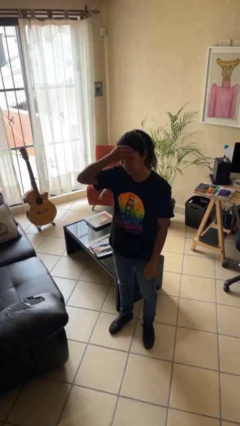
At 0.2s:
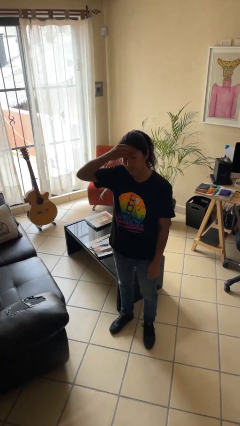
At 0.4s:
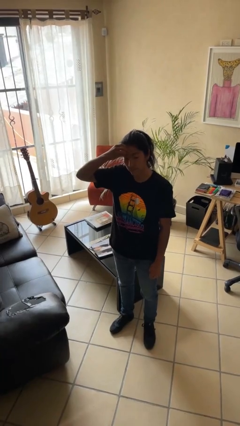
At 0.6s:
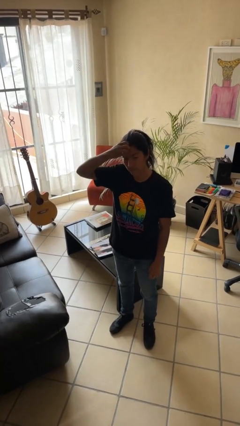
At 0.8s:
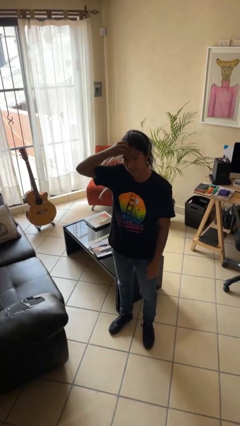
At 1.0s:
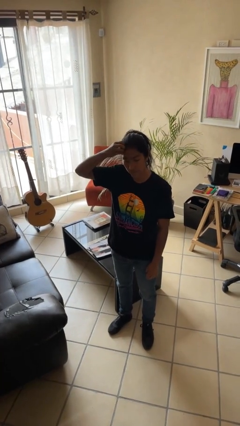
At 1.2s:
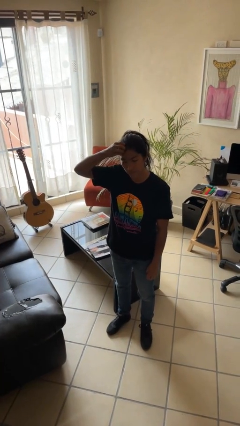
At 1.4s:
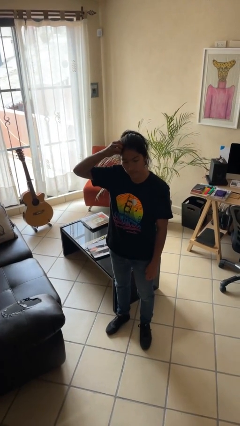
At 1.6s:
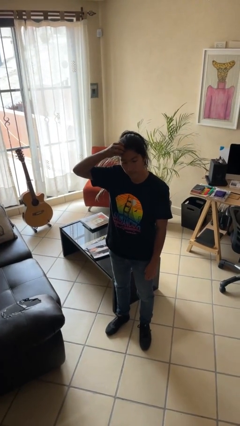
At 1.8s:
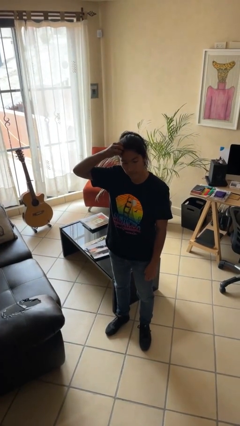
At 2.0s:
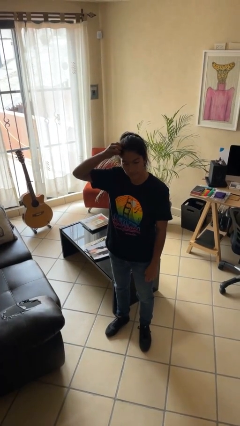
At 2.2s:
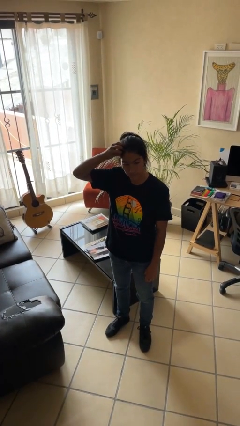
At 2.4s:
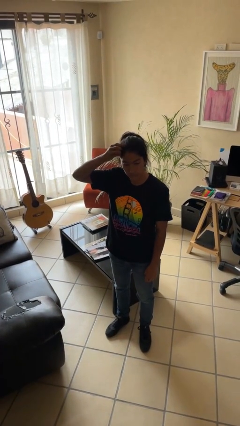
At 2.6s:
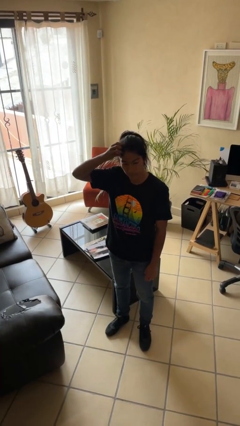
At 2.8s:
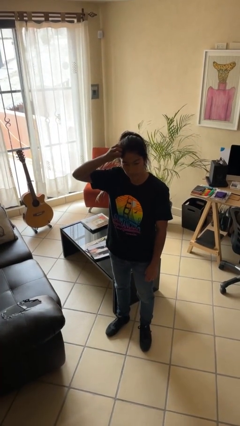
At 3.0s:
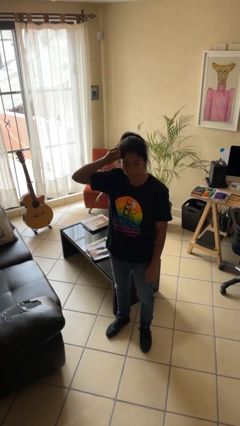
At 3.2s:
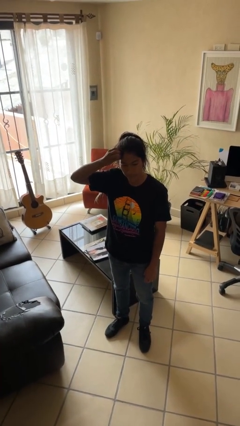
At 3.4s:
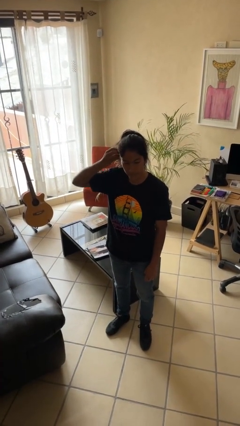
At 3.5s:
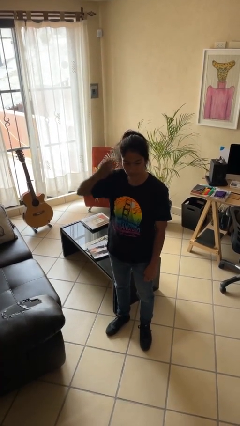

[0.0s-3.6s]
person scratches face

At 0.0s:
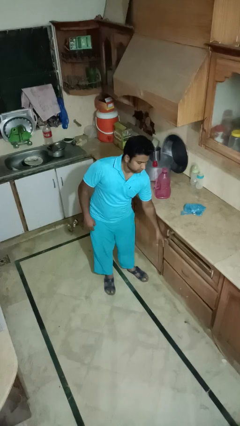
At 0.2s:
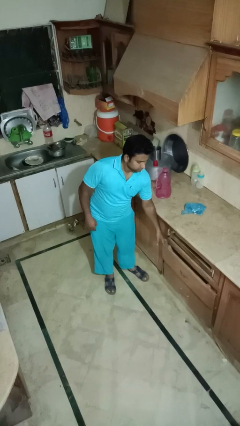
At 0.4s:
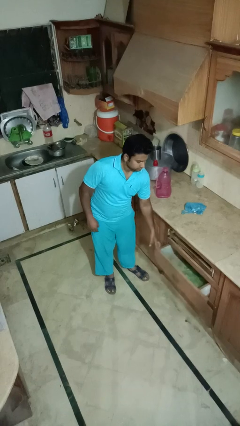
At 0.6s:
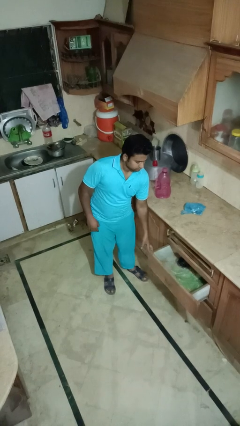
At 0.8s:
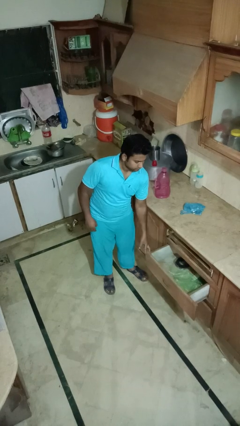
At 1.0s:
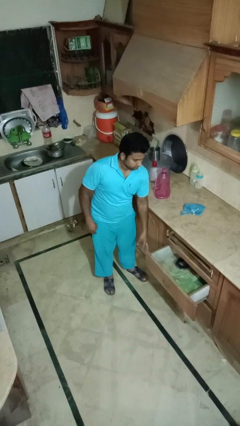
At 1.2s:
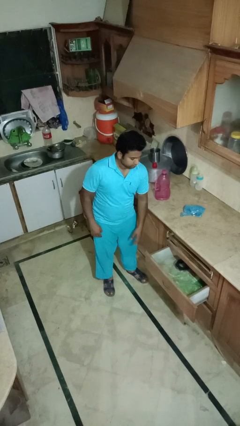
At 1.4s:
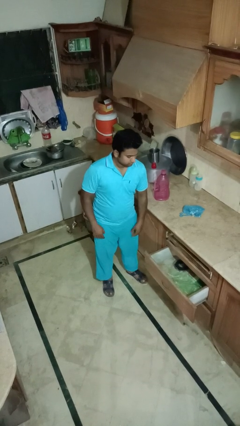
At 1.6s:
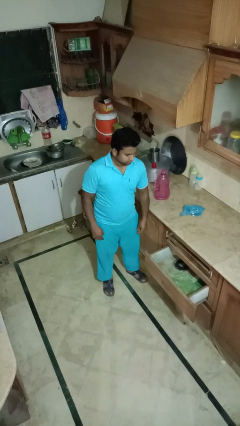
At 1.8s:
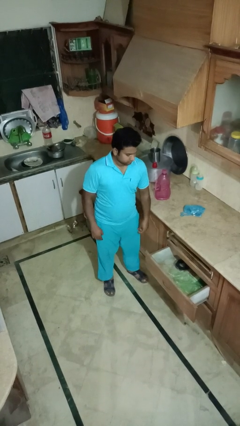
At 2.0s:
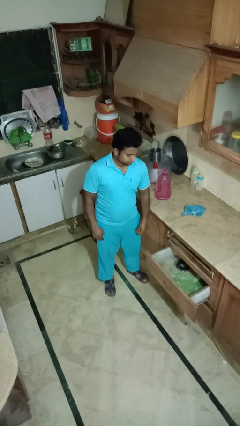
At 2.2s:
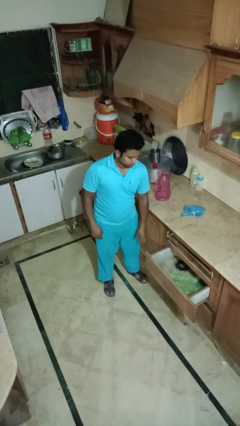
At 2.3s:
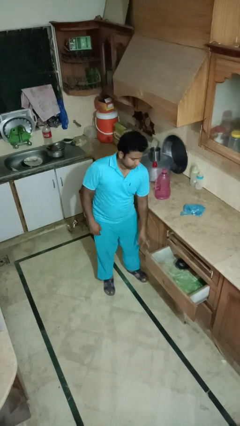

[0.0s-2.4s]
person opens kitchen drawer

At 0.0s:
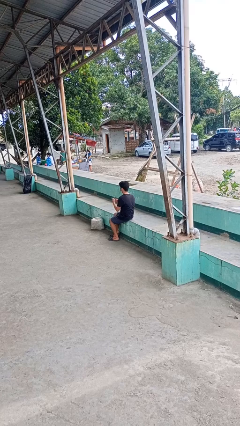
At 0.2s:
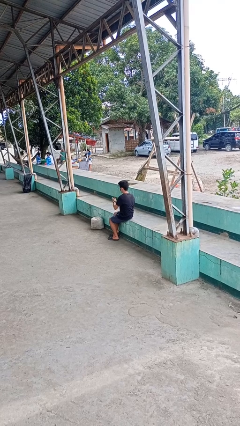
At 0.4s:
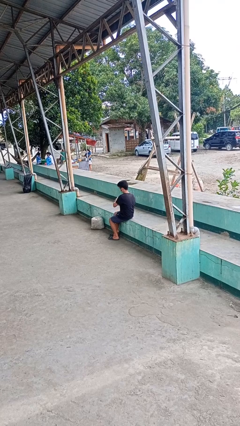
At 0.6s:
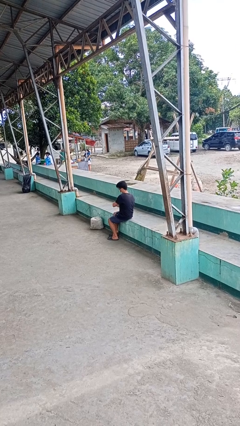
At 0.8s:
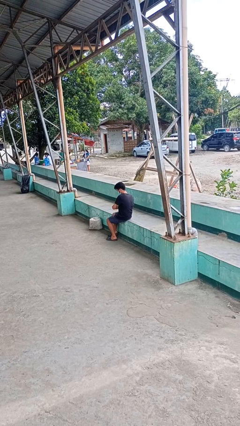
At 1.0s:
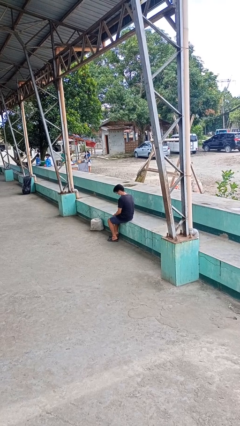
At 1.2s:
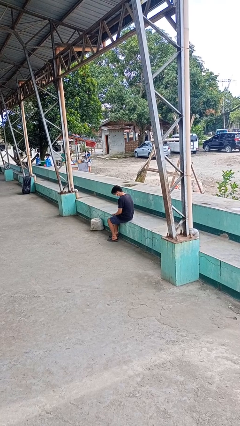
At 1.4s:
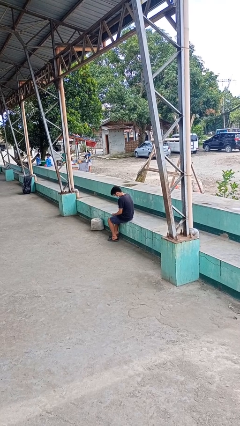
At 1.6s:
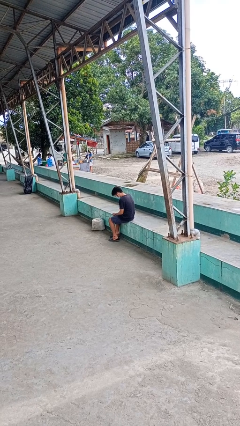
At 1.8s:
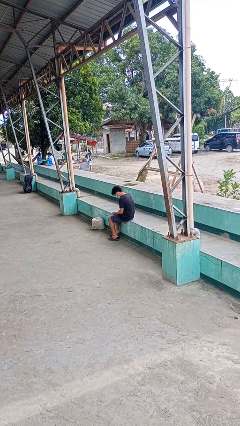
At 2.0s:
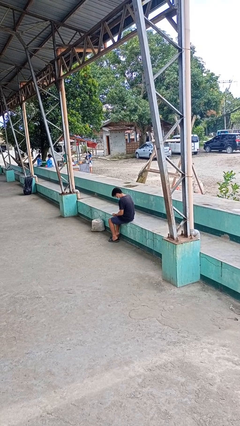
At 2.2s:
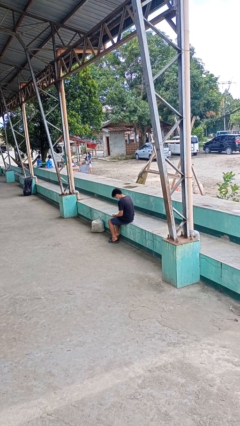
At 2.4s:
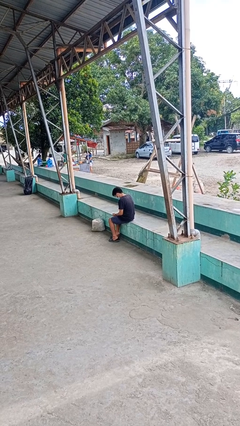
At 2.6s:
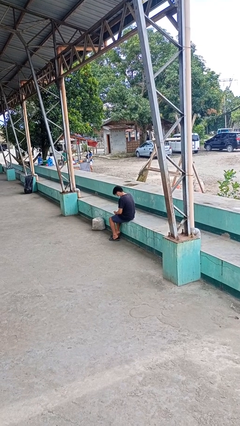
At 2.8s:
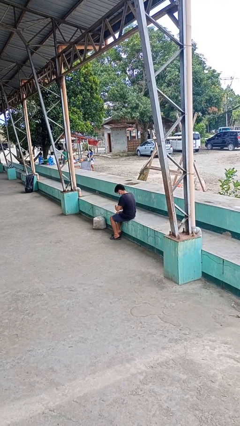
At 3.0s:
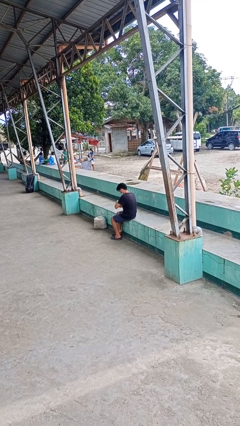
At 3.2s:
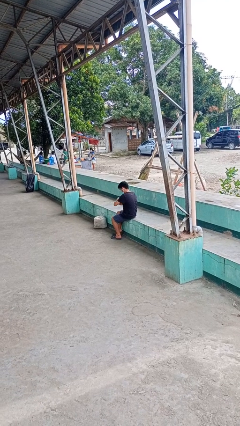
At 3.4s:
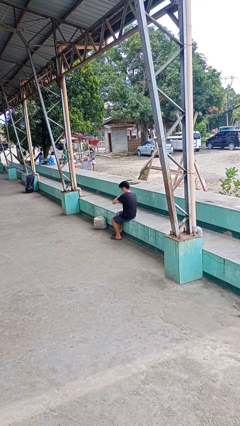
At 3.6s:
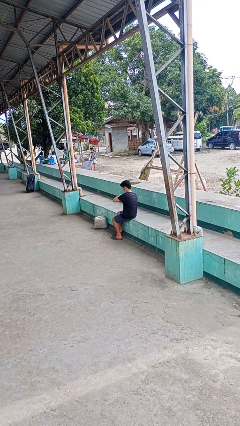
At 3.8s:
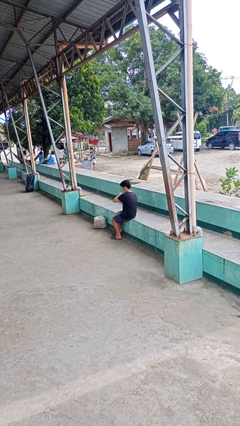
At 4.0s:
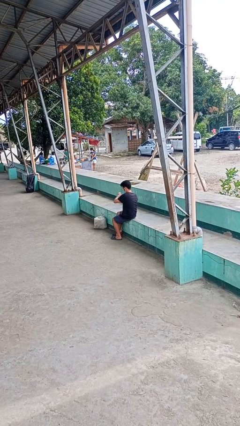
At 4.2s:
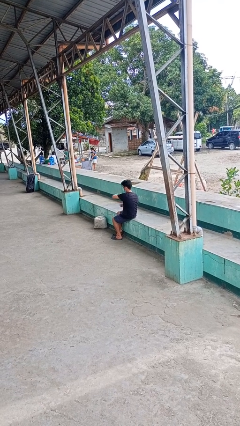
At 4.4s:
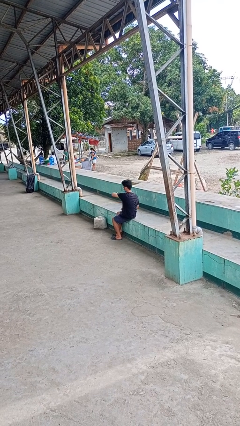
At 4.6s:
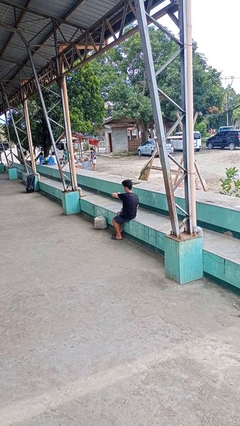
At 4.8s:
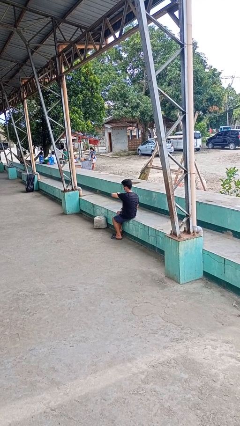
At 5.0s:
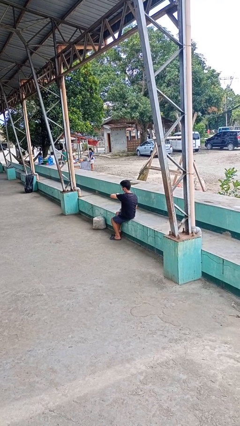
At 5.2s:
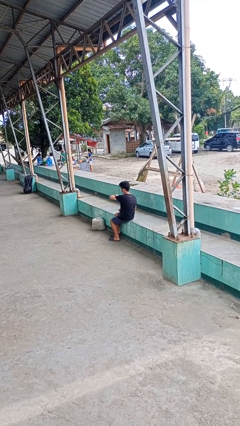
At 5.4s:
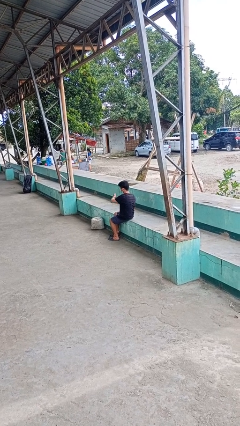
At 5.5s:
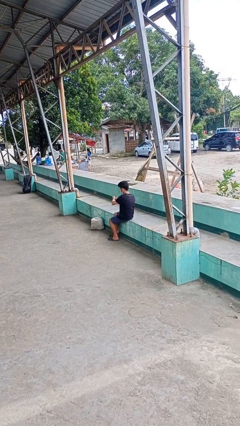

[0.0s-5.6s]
person puts on wristwatch

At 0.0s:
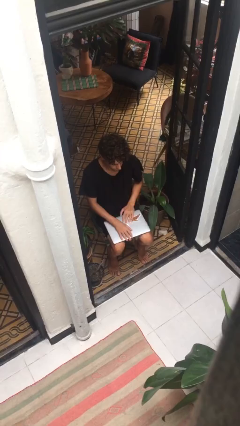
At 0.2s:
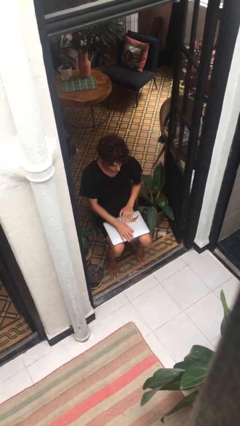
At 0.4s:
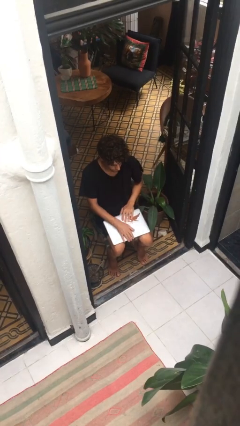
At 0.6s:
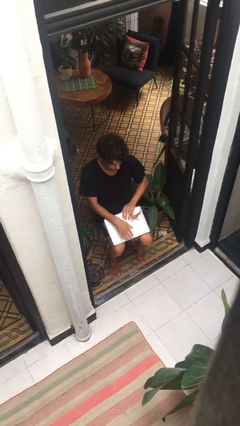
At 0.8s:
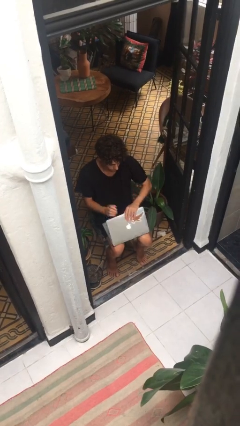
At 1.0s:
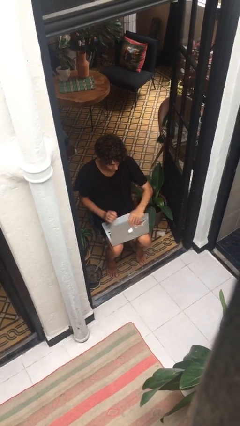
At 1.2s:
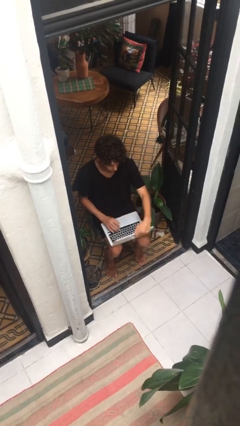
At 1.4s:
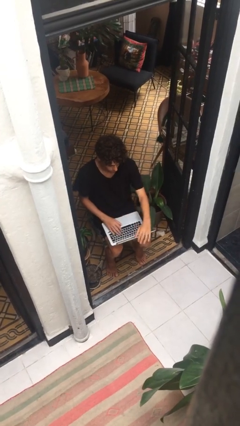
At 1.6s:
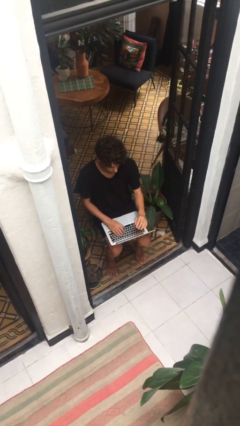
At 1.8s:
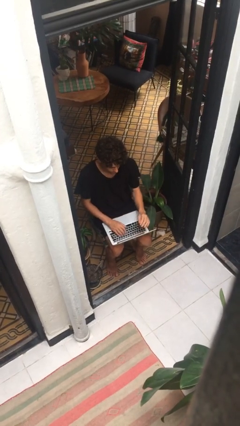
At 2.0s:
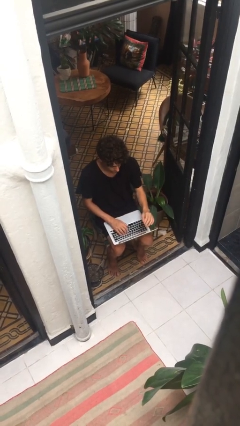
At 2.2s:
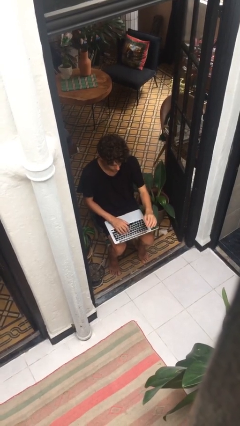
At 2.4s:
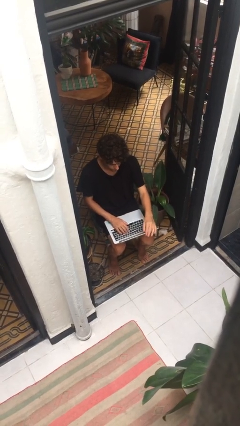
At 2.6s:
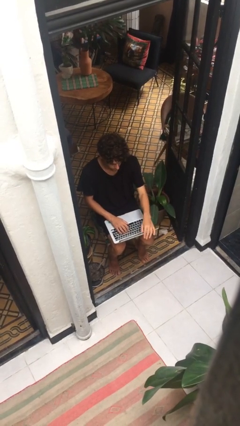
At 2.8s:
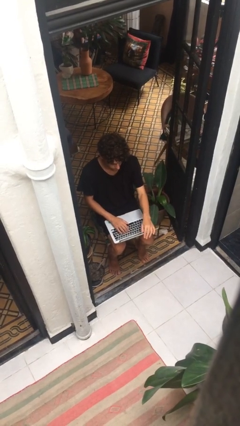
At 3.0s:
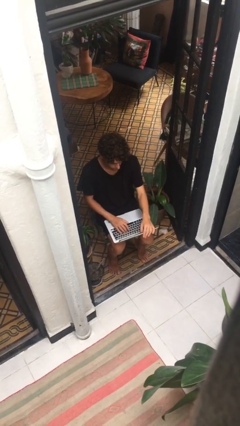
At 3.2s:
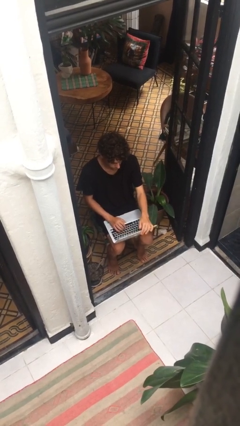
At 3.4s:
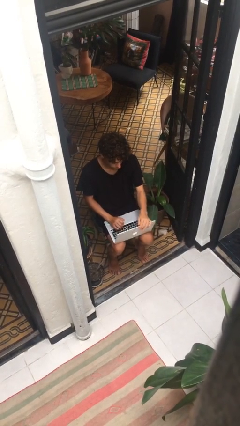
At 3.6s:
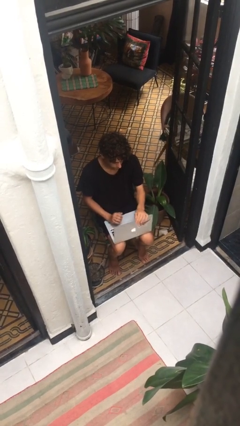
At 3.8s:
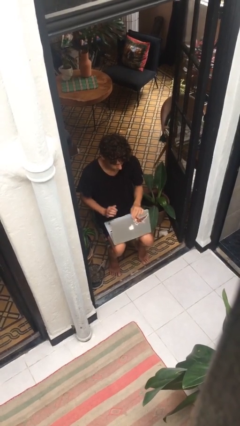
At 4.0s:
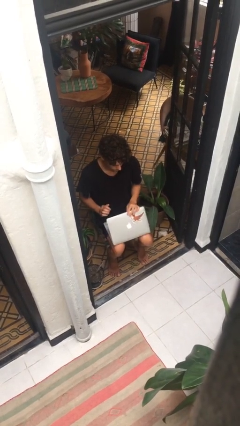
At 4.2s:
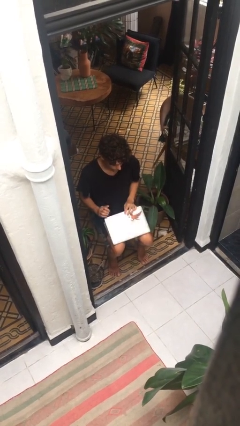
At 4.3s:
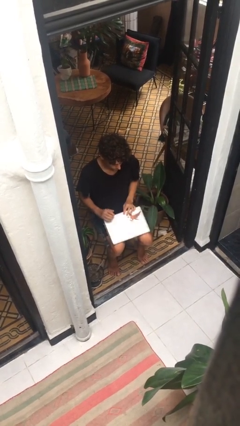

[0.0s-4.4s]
person interacts with laptop

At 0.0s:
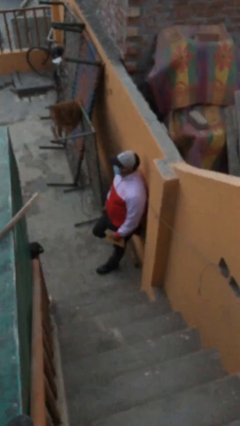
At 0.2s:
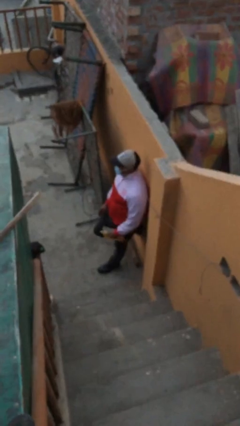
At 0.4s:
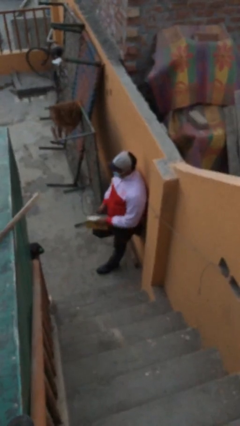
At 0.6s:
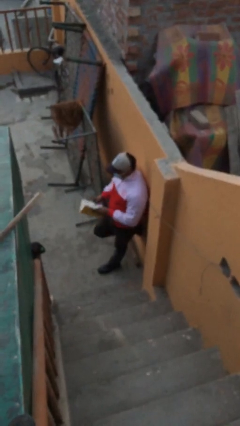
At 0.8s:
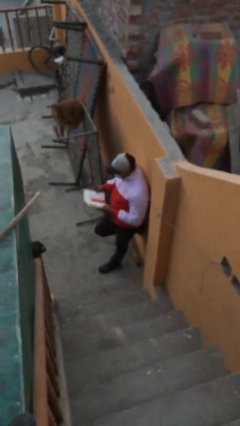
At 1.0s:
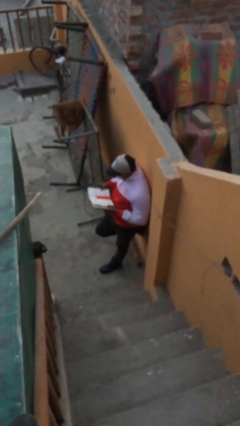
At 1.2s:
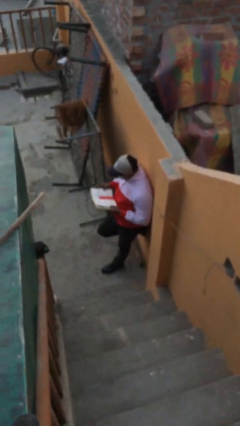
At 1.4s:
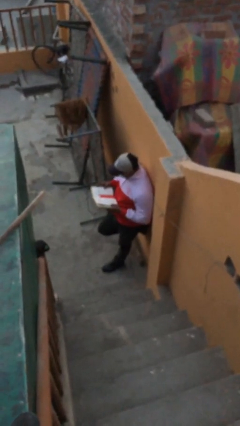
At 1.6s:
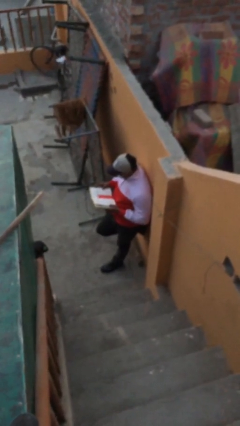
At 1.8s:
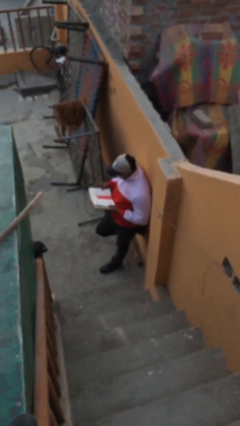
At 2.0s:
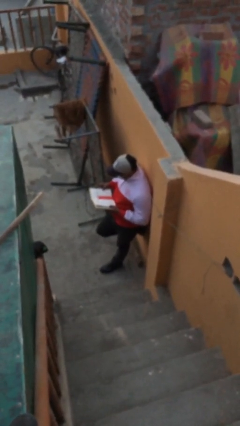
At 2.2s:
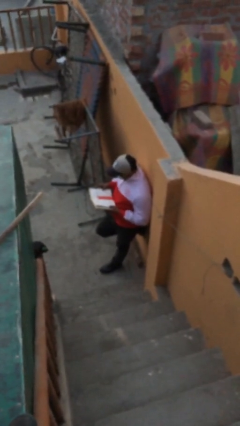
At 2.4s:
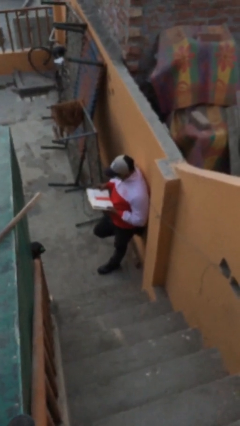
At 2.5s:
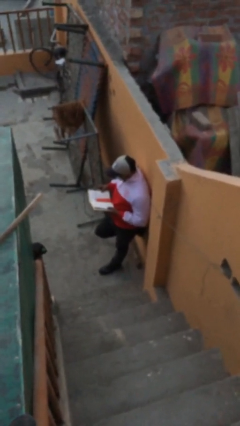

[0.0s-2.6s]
person reads document
